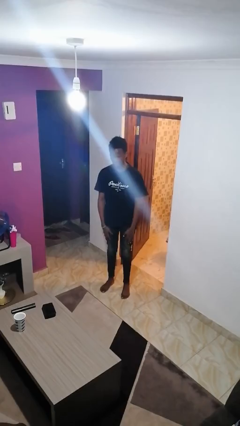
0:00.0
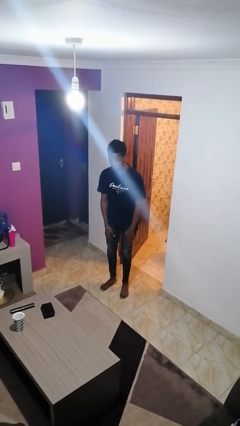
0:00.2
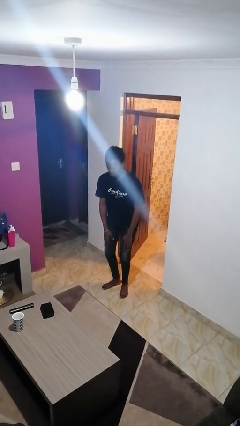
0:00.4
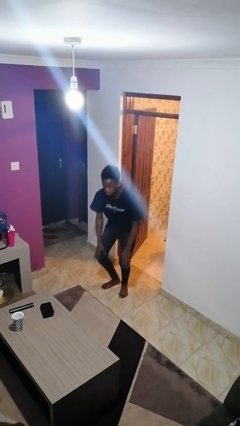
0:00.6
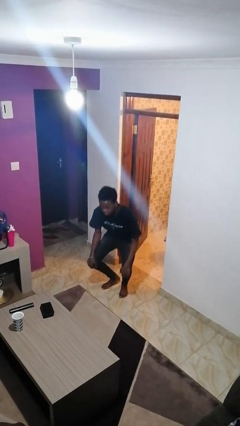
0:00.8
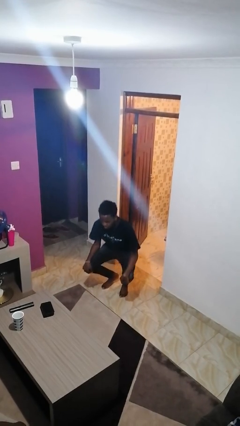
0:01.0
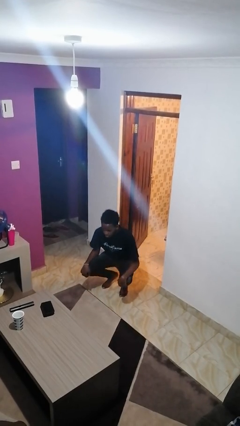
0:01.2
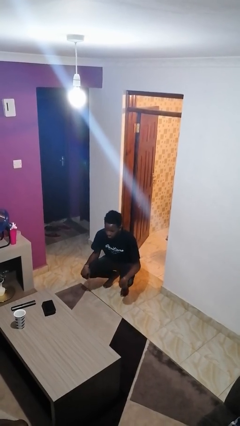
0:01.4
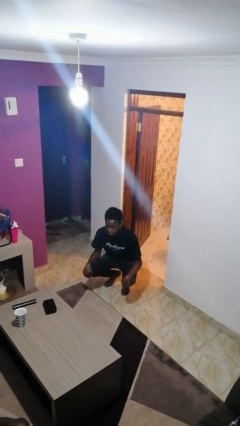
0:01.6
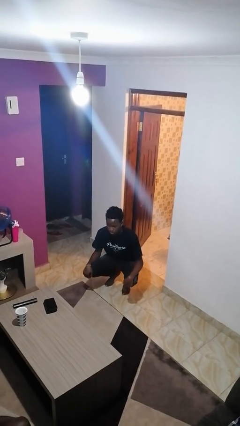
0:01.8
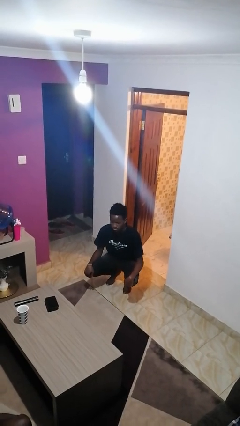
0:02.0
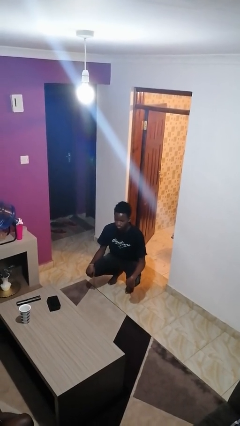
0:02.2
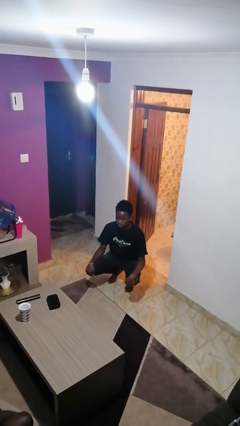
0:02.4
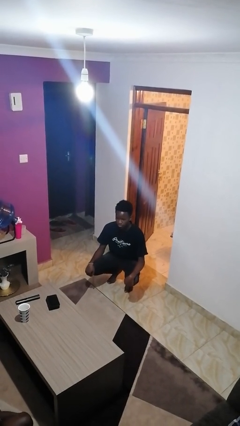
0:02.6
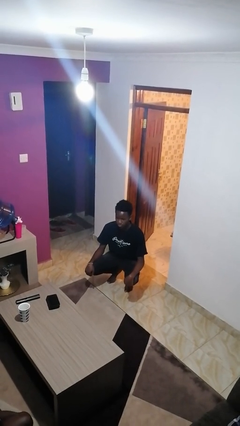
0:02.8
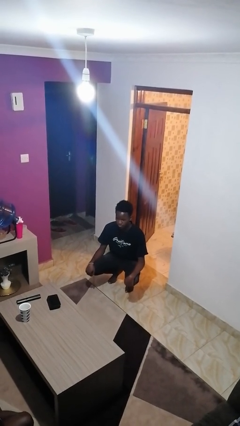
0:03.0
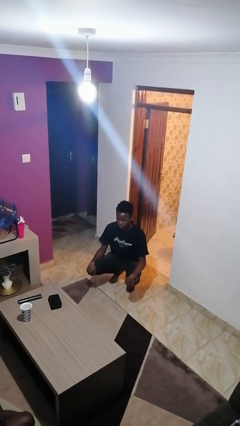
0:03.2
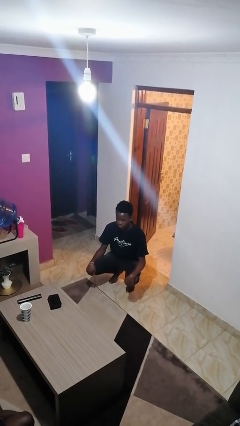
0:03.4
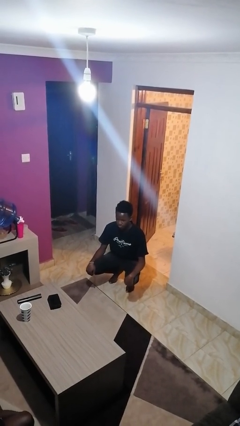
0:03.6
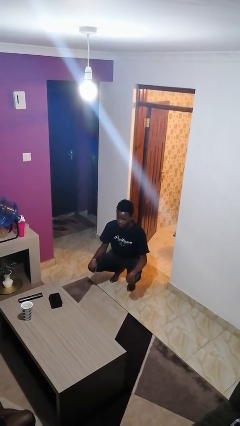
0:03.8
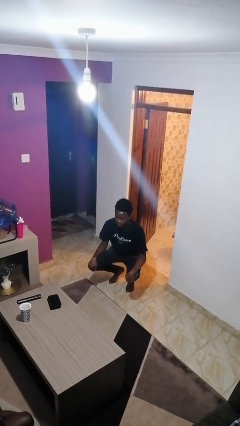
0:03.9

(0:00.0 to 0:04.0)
person squats

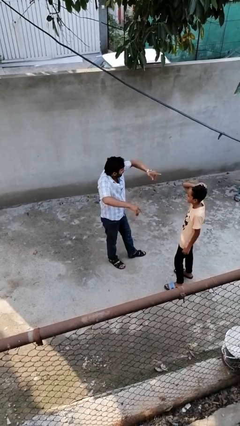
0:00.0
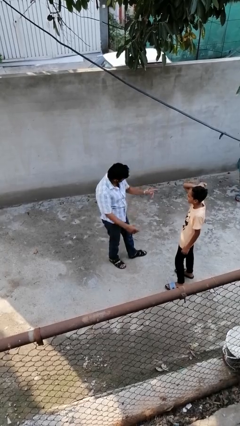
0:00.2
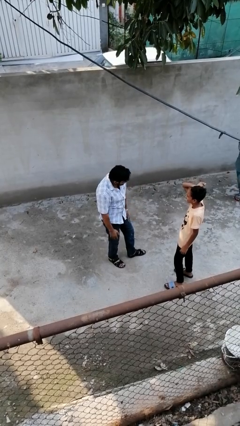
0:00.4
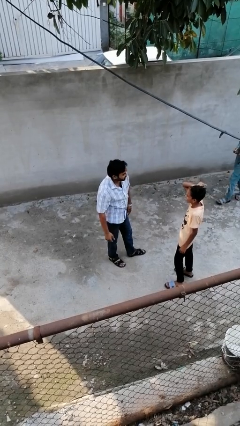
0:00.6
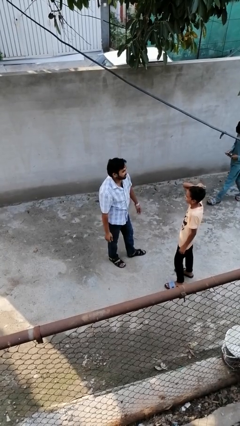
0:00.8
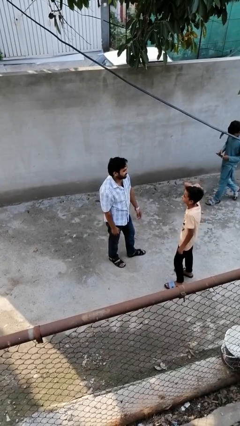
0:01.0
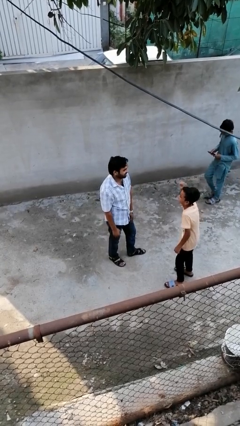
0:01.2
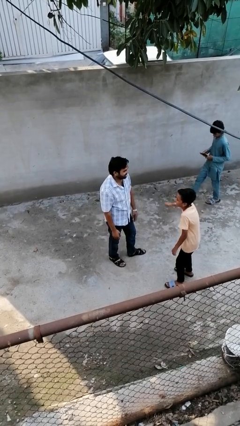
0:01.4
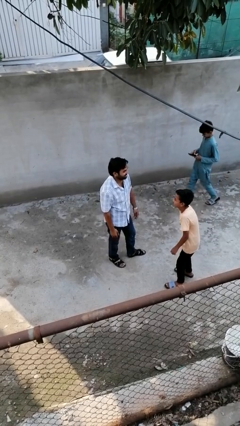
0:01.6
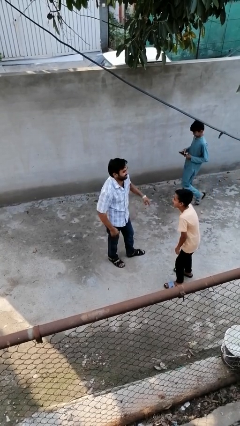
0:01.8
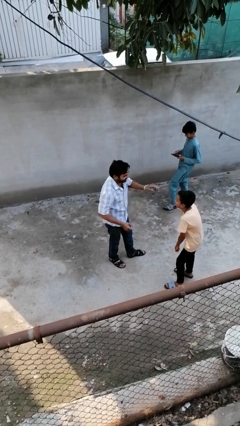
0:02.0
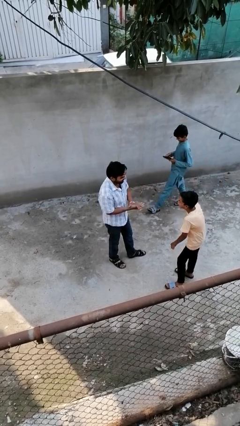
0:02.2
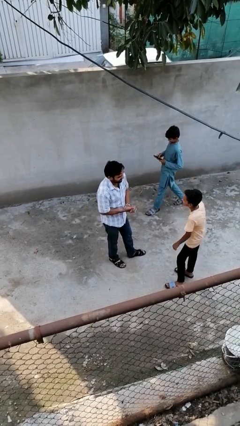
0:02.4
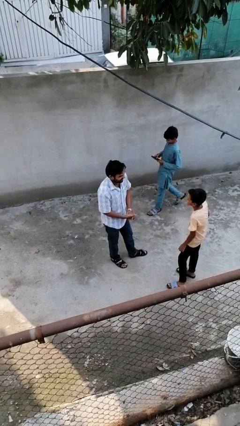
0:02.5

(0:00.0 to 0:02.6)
person laughs with person

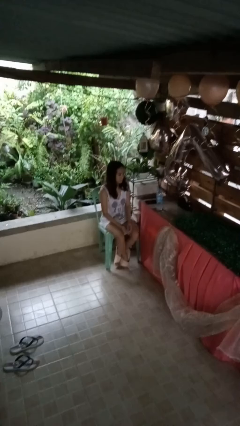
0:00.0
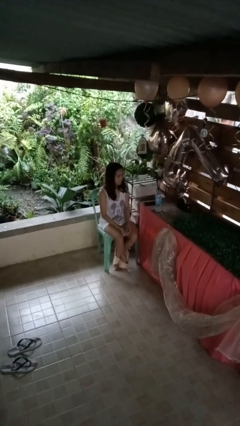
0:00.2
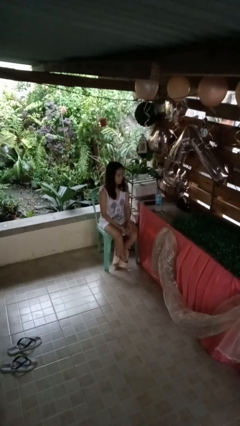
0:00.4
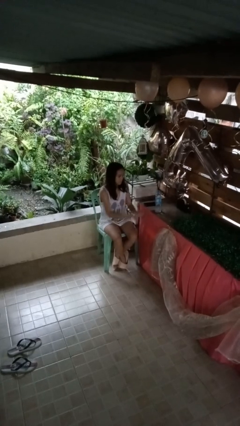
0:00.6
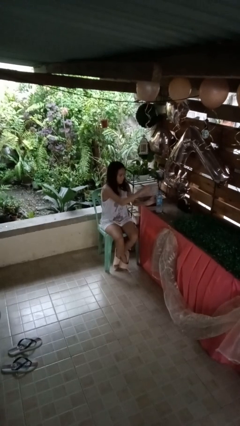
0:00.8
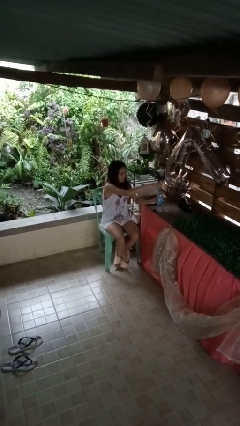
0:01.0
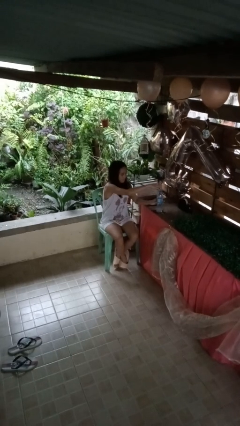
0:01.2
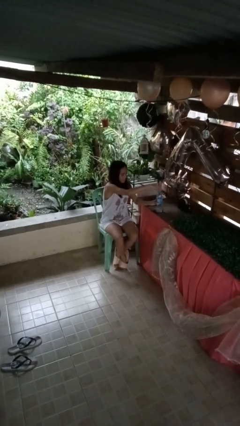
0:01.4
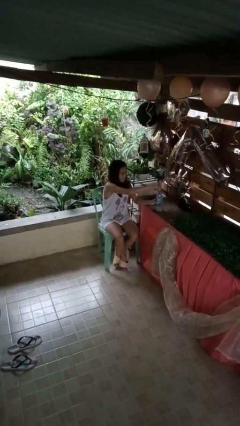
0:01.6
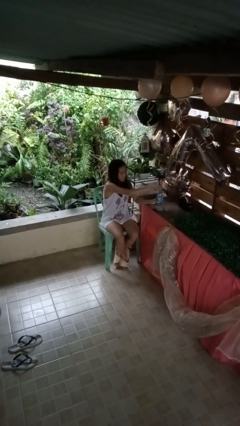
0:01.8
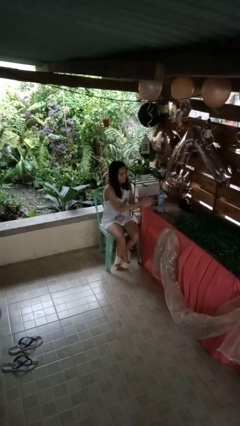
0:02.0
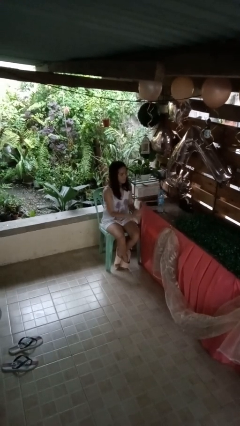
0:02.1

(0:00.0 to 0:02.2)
person screws lid to bottle

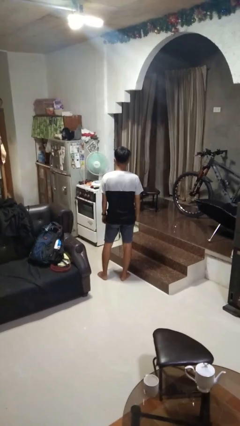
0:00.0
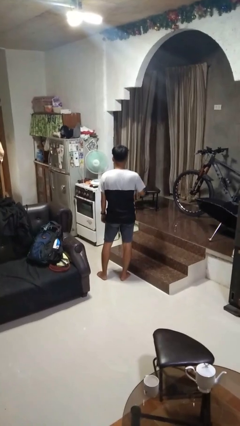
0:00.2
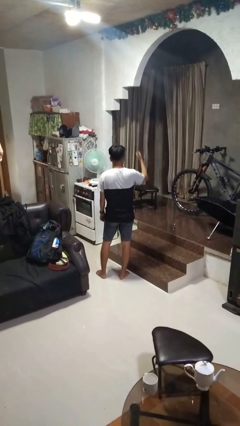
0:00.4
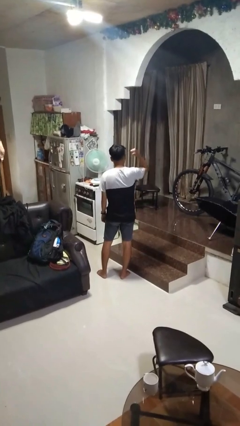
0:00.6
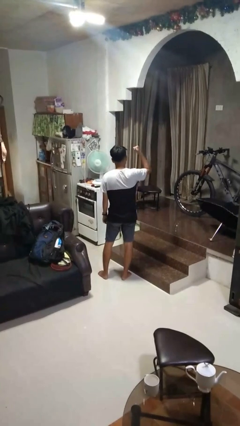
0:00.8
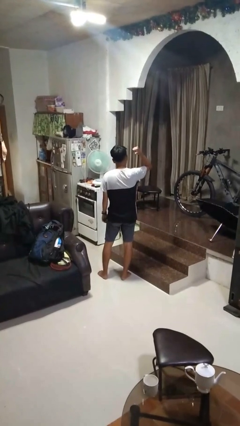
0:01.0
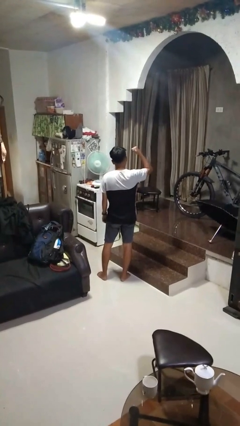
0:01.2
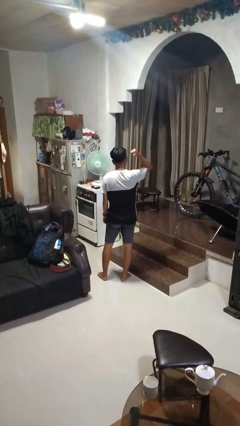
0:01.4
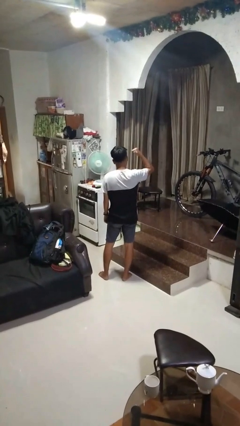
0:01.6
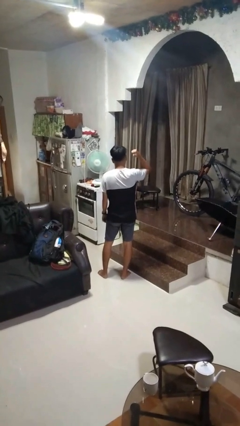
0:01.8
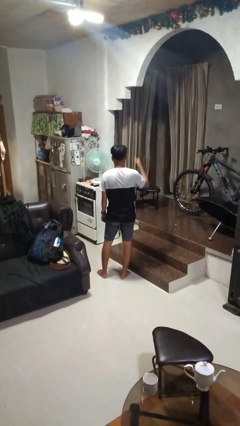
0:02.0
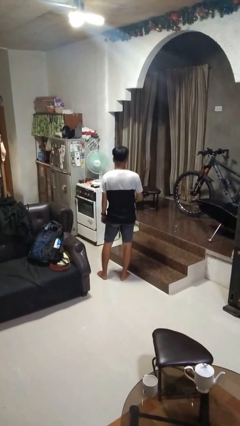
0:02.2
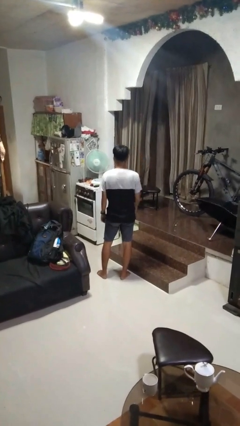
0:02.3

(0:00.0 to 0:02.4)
person gestures behind me

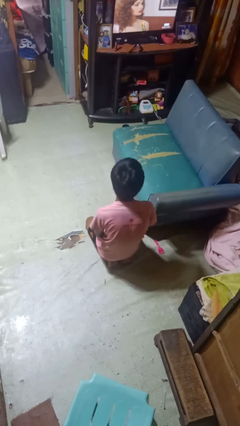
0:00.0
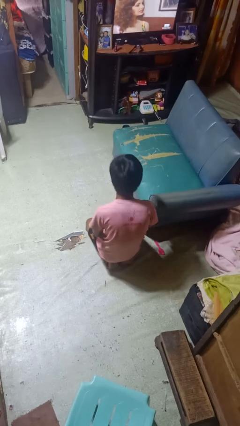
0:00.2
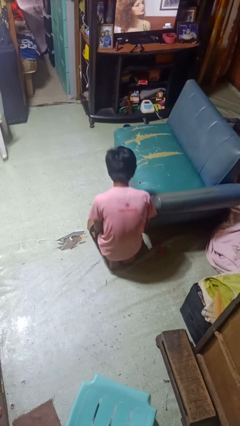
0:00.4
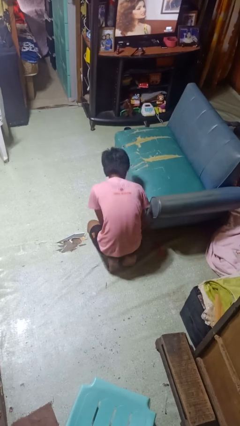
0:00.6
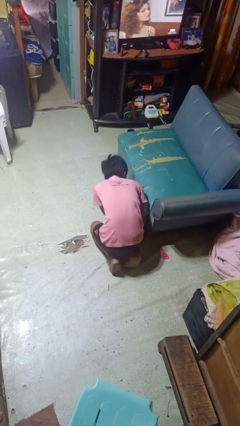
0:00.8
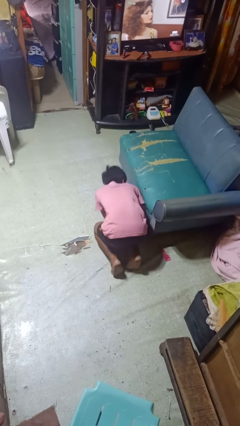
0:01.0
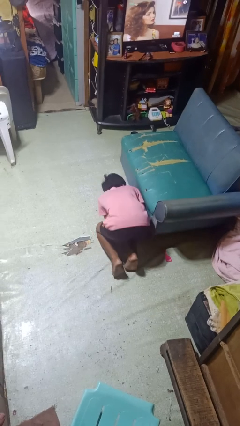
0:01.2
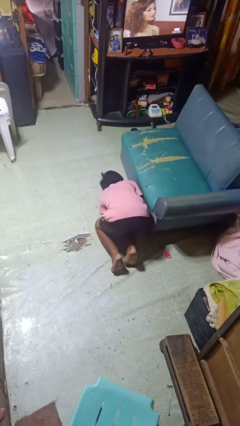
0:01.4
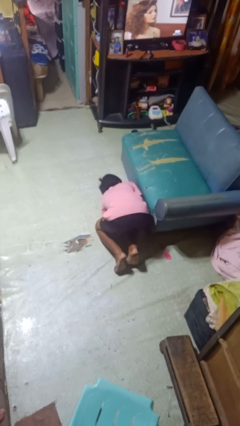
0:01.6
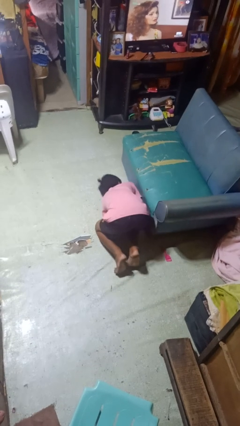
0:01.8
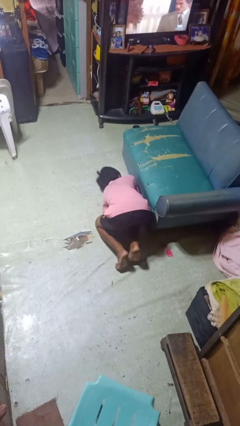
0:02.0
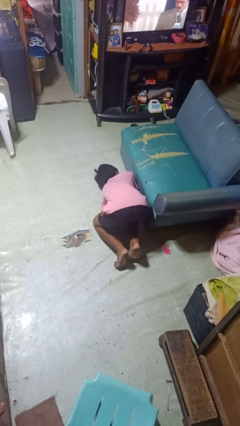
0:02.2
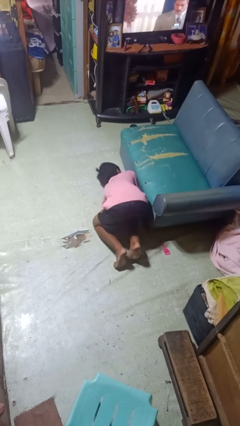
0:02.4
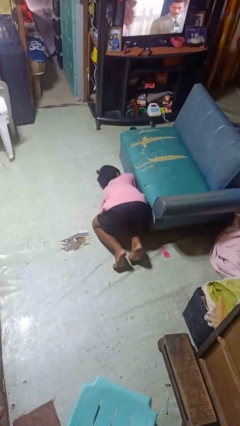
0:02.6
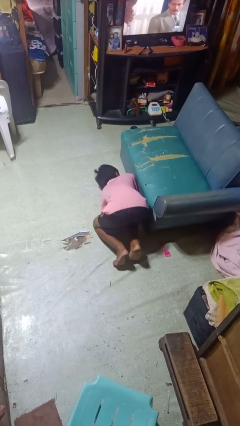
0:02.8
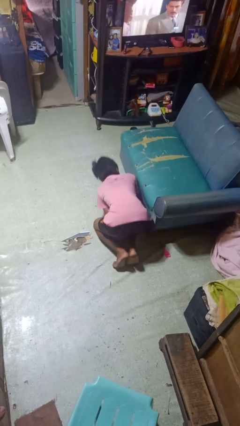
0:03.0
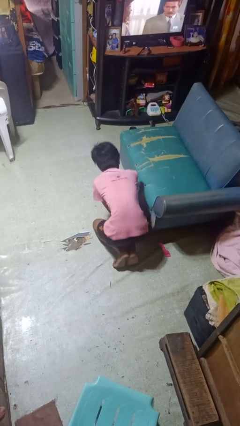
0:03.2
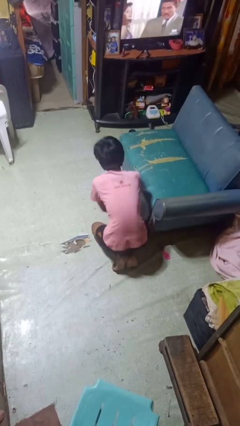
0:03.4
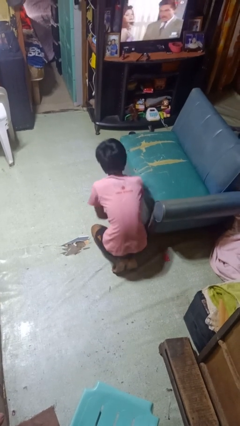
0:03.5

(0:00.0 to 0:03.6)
person searches under couch

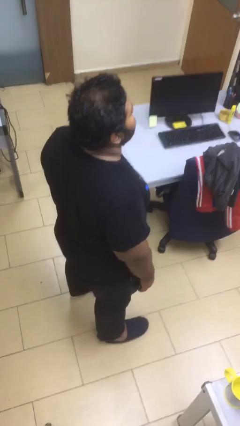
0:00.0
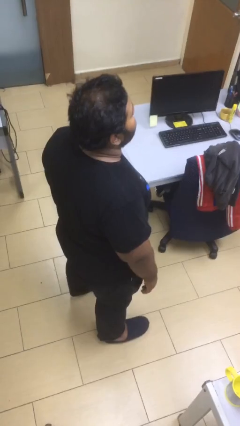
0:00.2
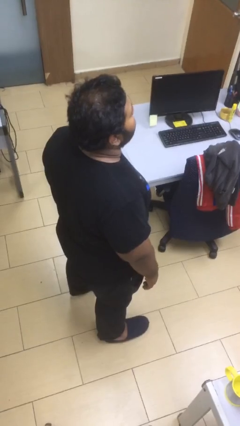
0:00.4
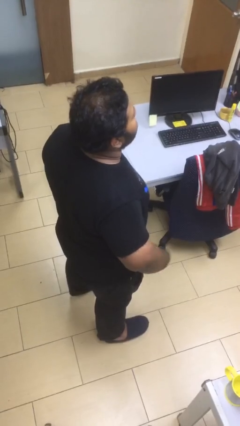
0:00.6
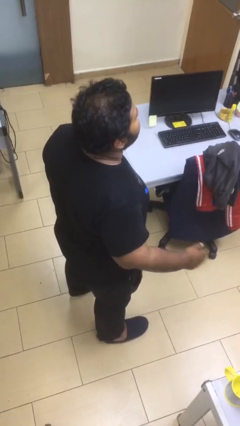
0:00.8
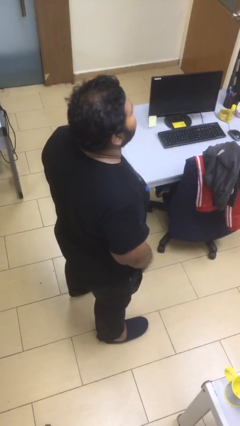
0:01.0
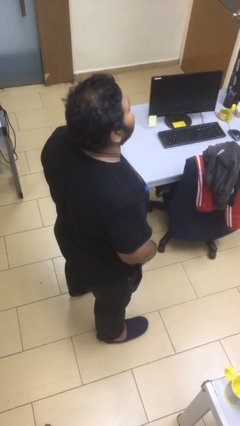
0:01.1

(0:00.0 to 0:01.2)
person slaps hands on thighs

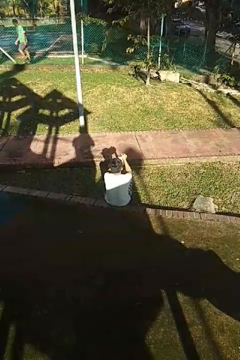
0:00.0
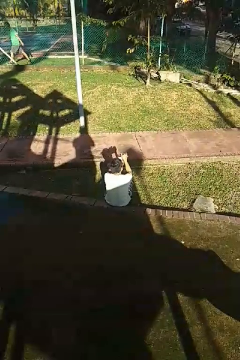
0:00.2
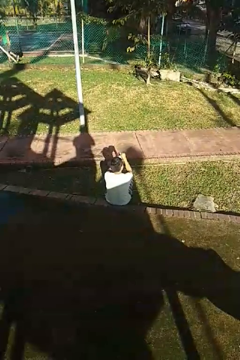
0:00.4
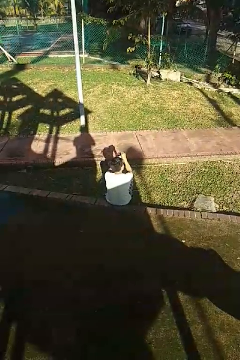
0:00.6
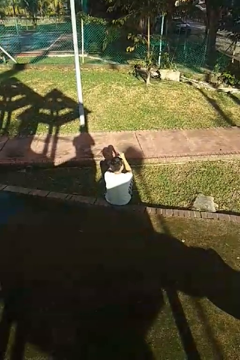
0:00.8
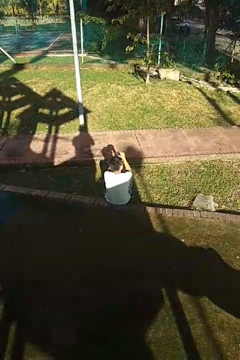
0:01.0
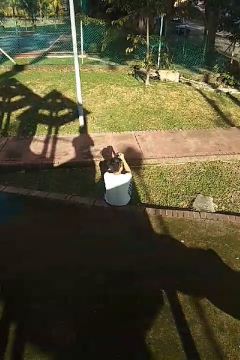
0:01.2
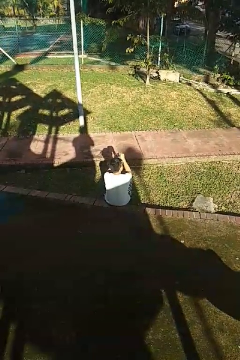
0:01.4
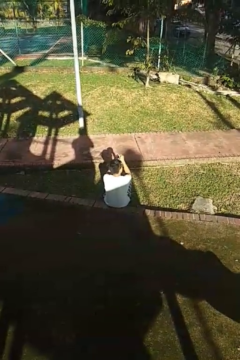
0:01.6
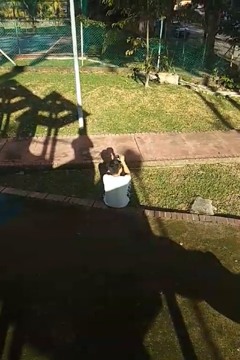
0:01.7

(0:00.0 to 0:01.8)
person stirs mug
